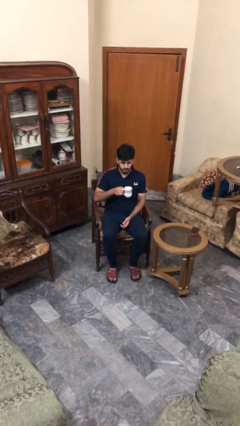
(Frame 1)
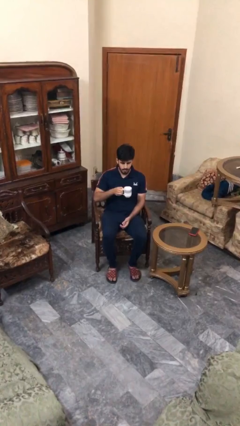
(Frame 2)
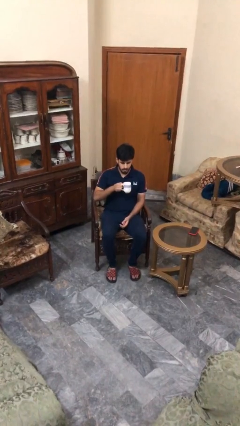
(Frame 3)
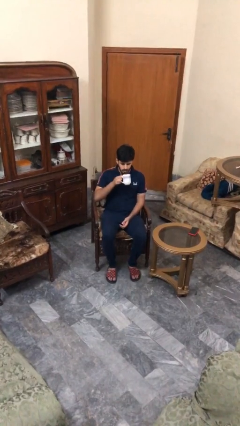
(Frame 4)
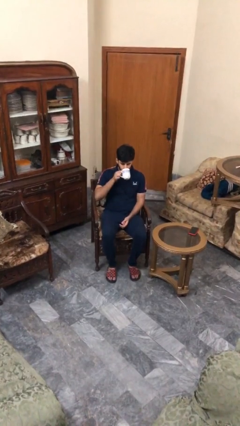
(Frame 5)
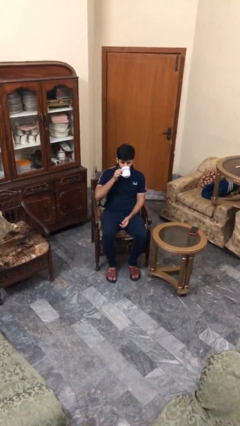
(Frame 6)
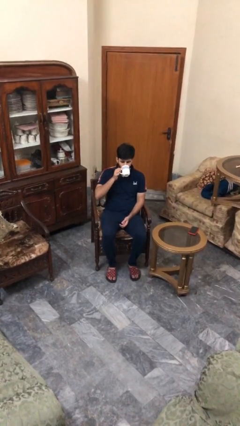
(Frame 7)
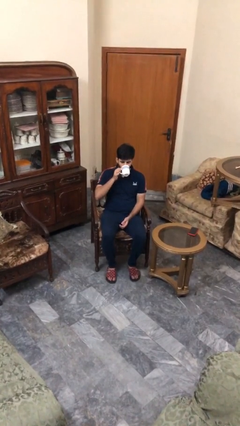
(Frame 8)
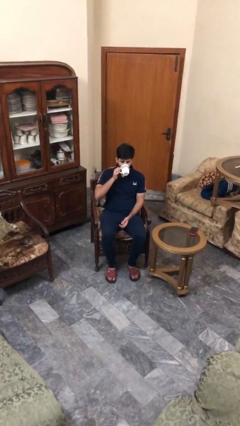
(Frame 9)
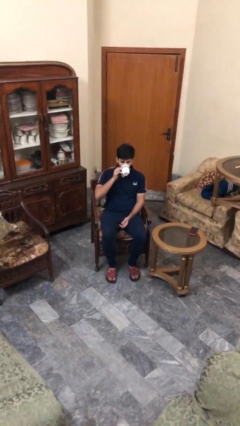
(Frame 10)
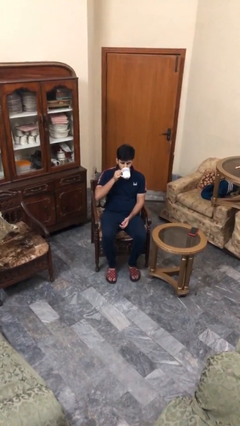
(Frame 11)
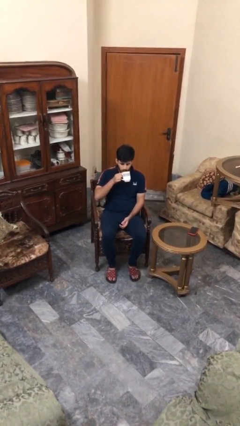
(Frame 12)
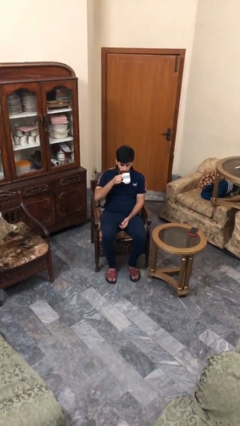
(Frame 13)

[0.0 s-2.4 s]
person drinks from mug

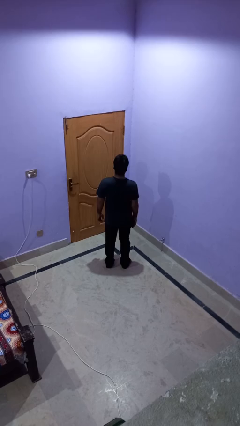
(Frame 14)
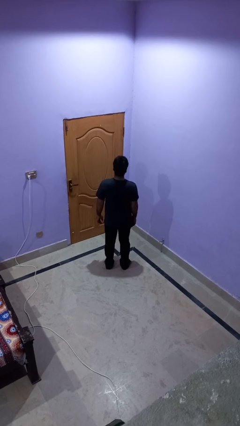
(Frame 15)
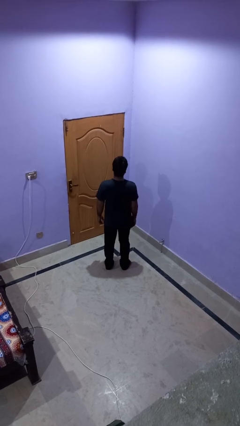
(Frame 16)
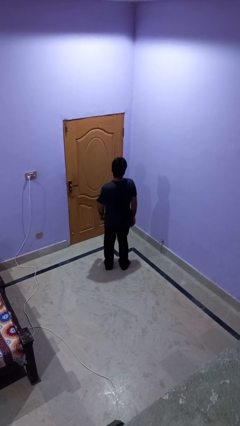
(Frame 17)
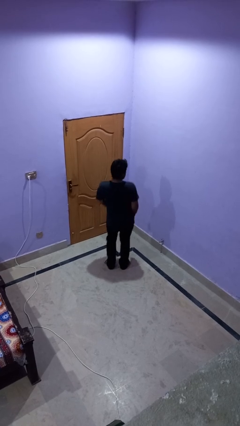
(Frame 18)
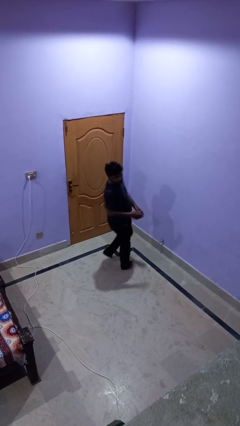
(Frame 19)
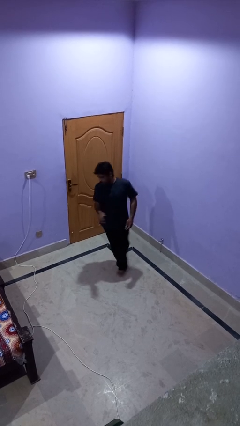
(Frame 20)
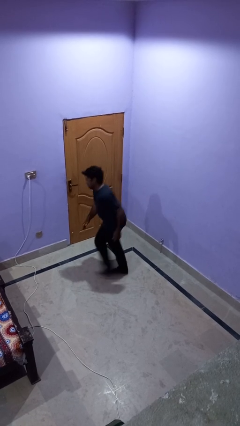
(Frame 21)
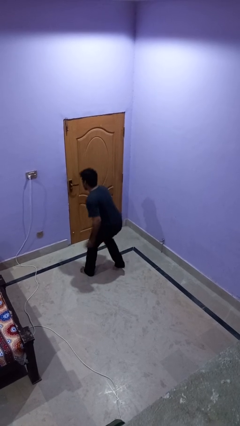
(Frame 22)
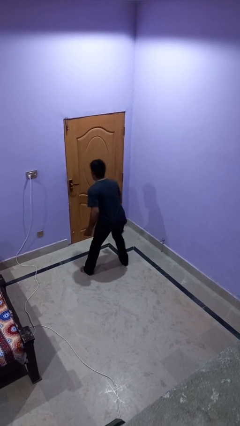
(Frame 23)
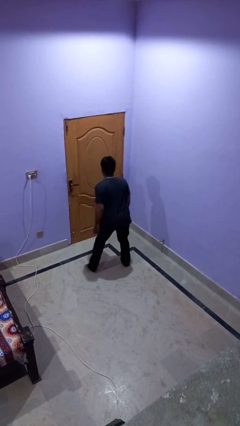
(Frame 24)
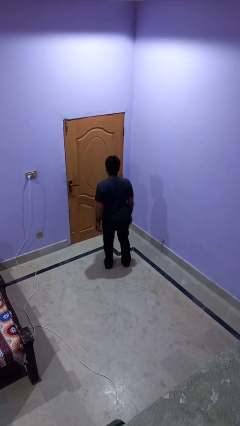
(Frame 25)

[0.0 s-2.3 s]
person twirls

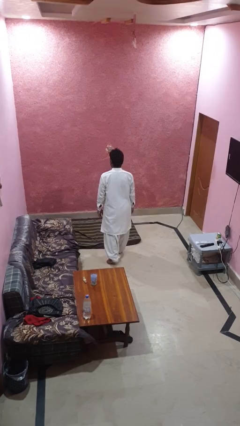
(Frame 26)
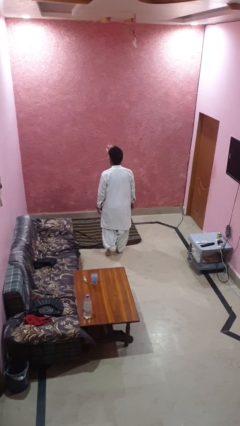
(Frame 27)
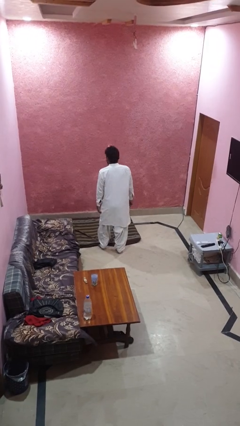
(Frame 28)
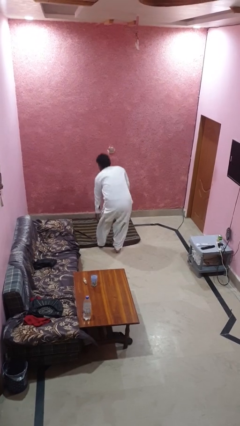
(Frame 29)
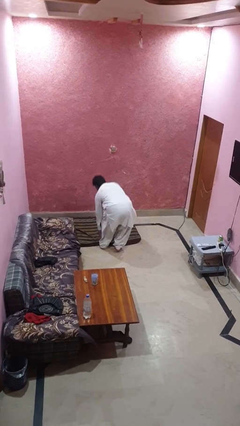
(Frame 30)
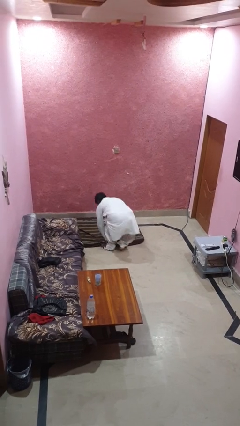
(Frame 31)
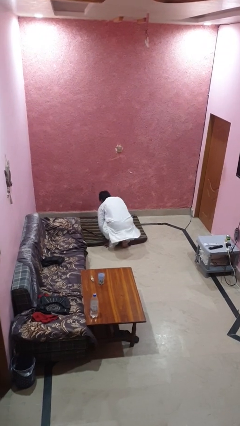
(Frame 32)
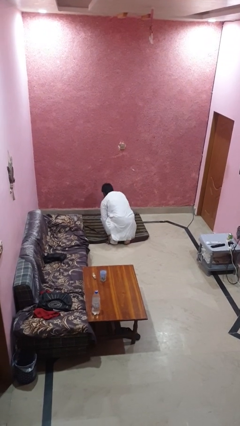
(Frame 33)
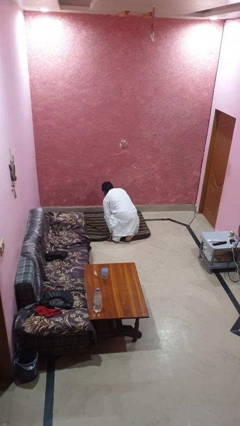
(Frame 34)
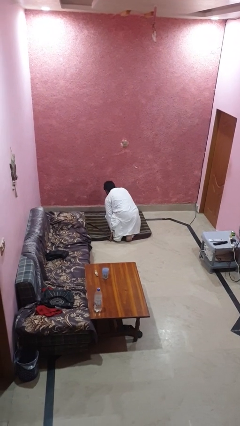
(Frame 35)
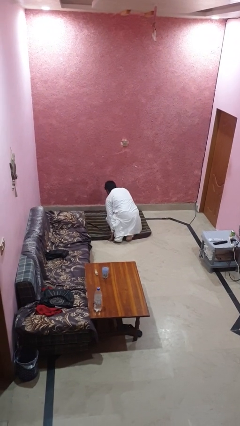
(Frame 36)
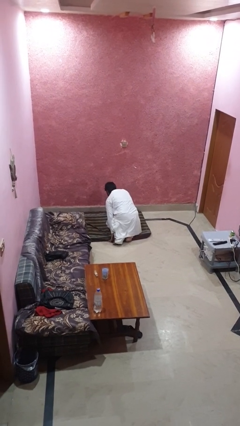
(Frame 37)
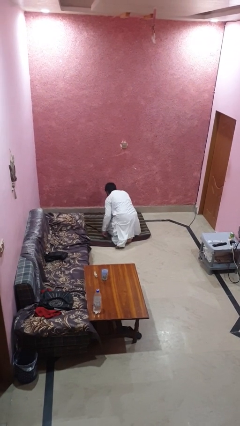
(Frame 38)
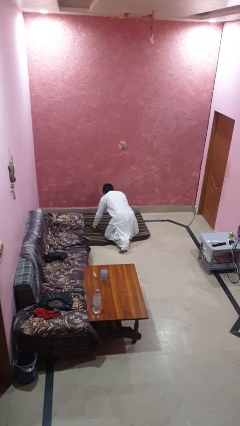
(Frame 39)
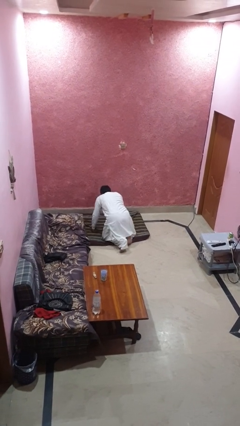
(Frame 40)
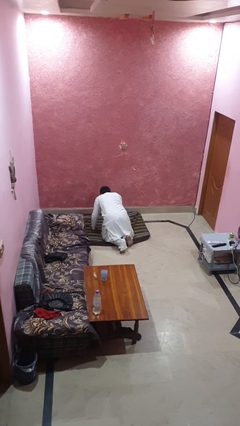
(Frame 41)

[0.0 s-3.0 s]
person trips on object on floor

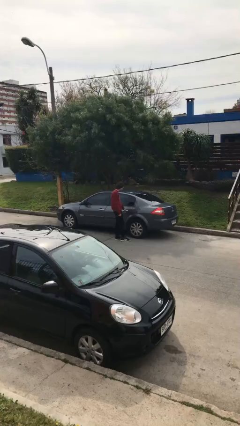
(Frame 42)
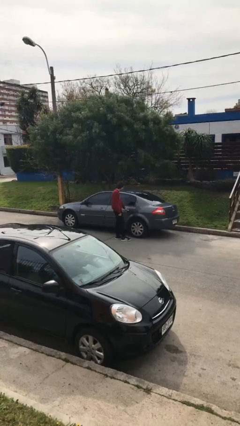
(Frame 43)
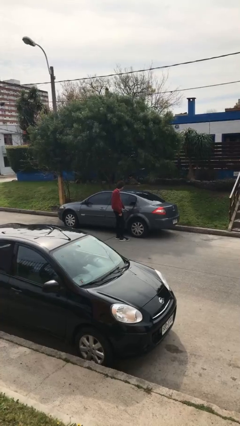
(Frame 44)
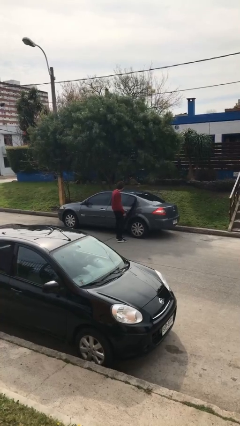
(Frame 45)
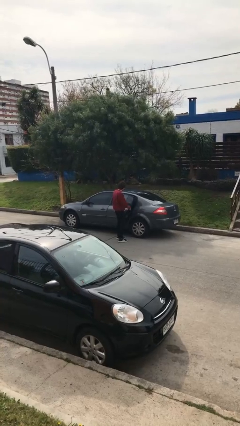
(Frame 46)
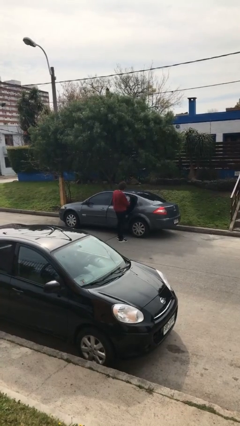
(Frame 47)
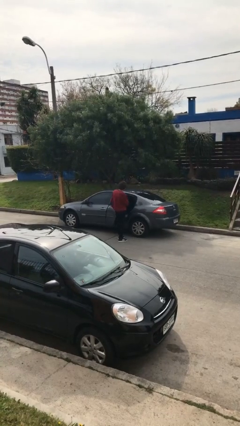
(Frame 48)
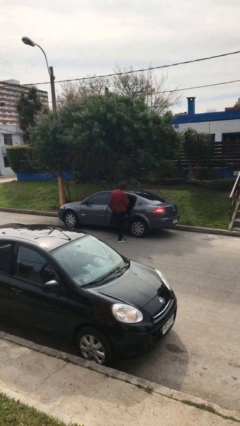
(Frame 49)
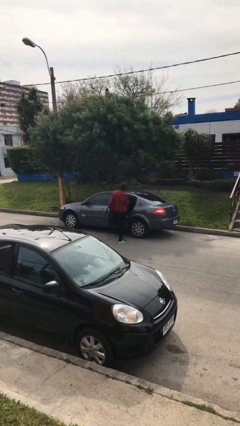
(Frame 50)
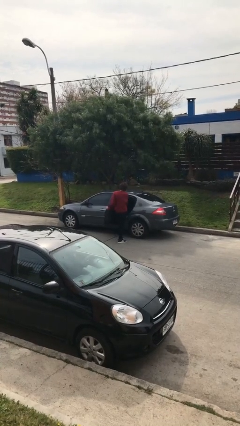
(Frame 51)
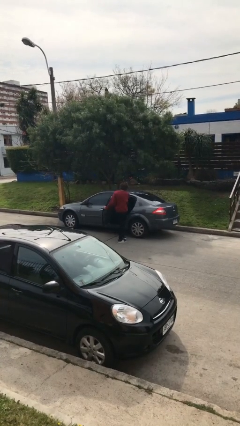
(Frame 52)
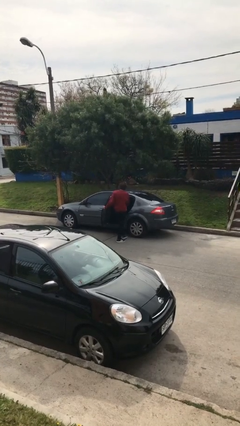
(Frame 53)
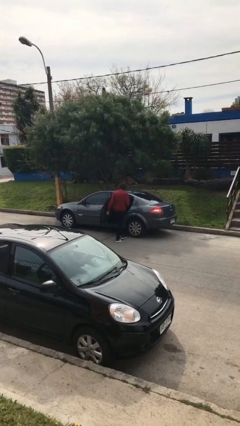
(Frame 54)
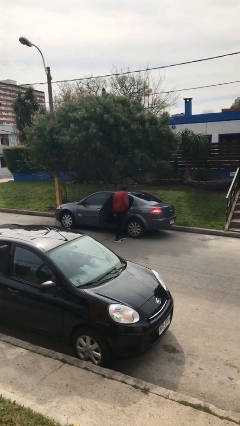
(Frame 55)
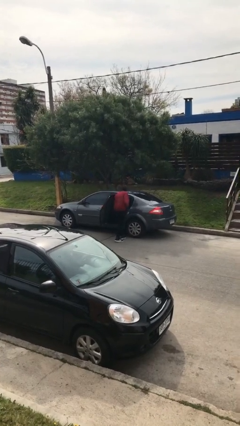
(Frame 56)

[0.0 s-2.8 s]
person opens car door

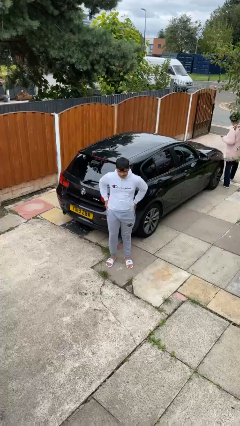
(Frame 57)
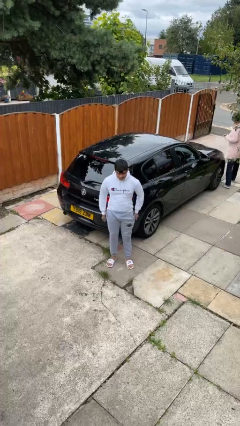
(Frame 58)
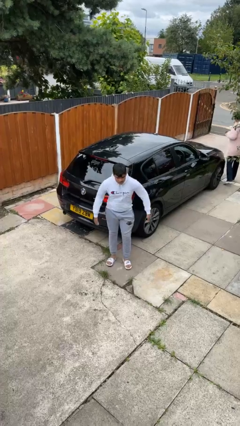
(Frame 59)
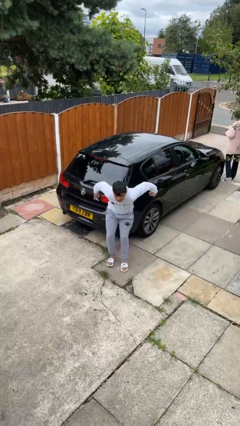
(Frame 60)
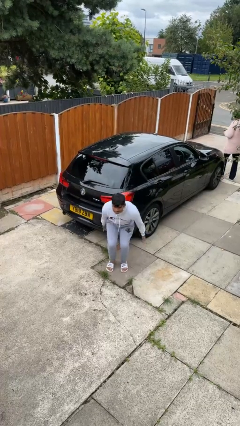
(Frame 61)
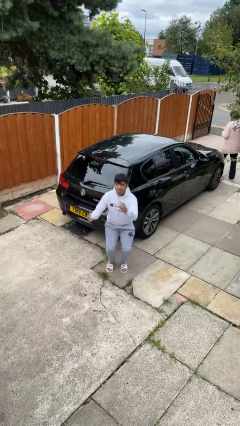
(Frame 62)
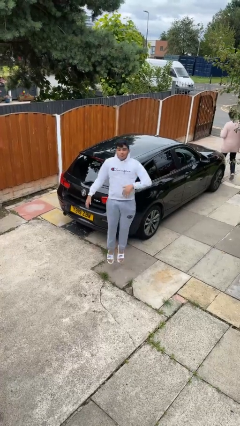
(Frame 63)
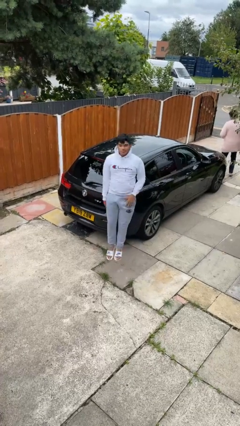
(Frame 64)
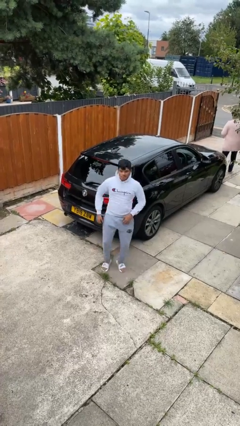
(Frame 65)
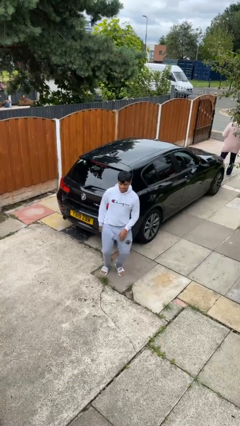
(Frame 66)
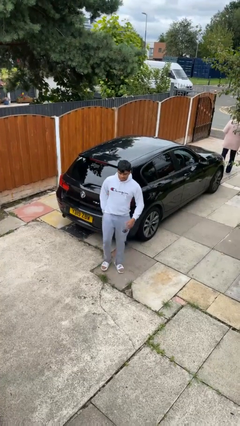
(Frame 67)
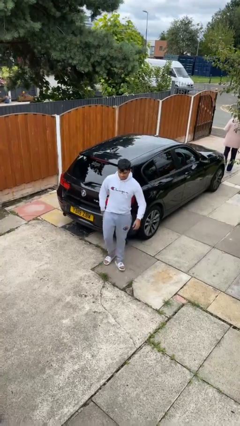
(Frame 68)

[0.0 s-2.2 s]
person jumps

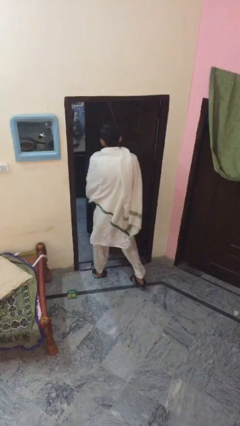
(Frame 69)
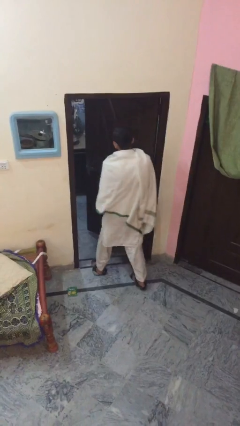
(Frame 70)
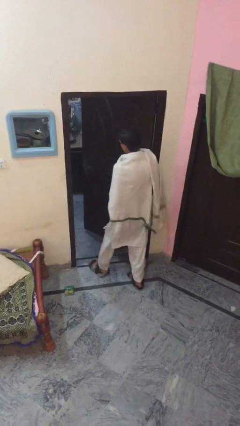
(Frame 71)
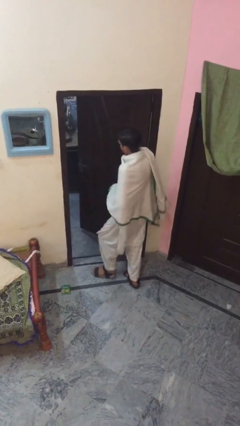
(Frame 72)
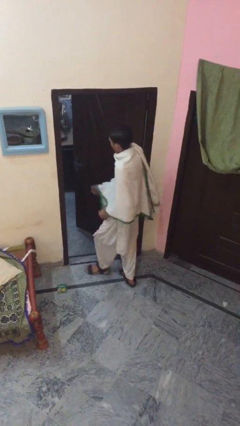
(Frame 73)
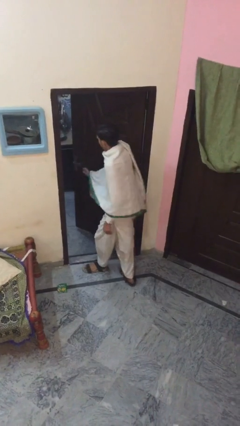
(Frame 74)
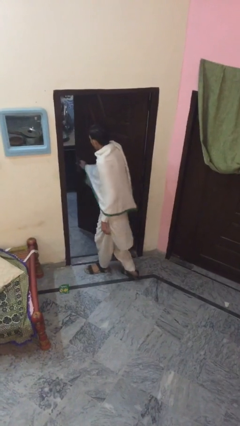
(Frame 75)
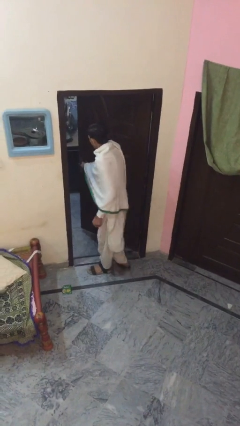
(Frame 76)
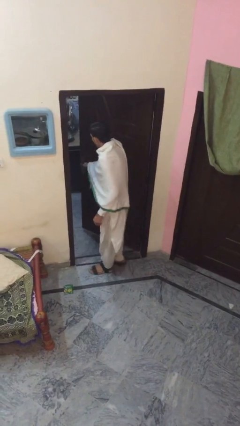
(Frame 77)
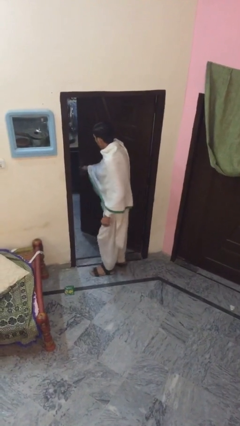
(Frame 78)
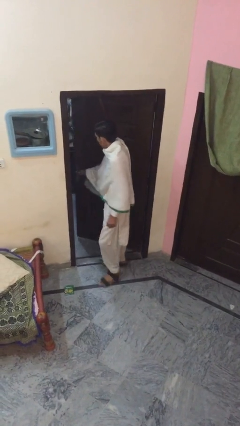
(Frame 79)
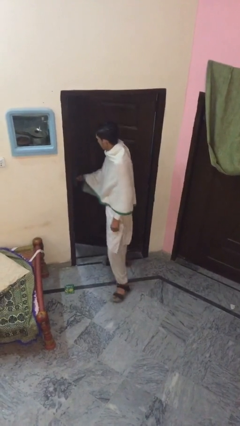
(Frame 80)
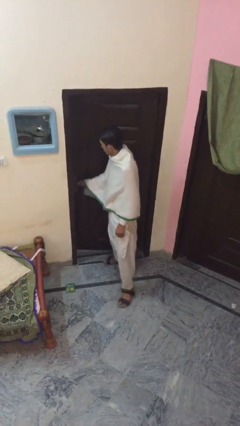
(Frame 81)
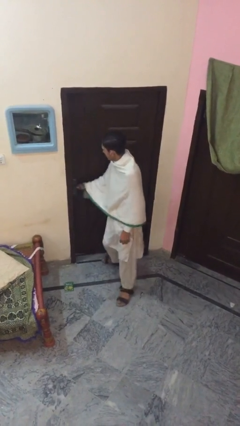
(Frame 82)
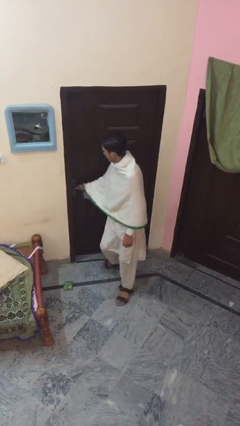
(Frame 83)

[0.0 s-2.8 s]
person closes facility door

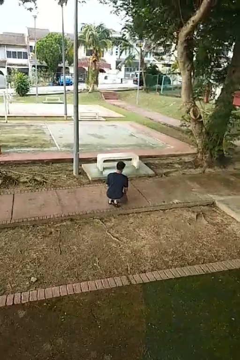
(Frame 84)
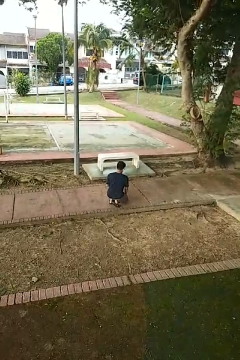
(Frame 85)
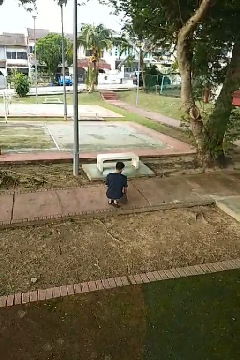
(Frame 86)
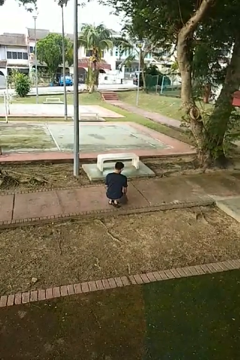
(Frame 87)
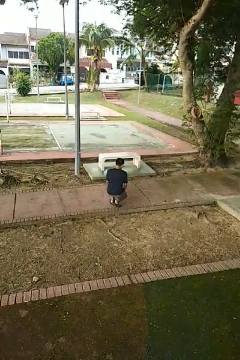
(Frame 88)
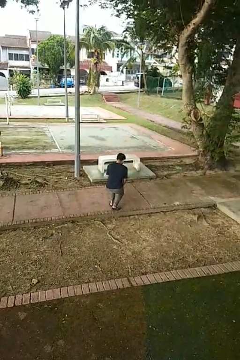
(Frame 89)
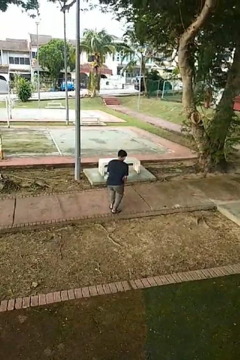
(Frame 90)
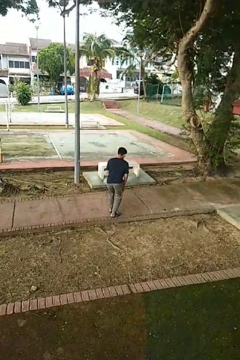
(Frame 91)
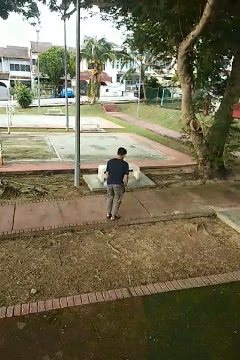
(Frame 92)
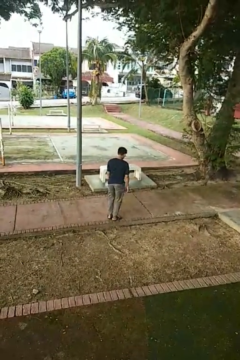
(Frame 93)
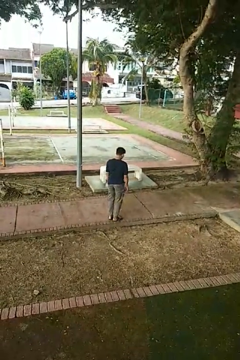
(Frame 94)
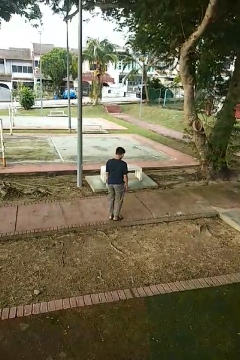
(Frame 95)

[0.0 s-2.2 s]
person stands up from floor
